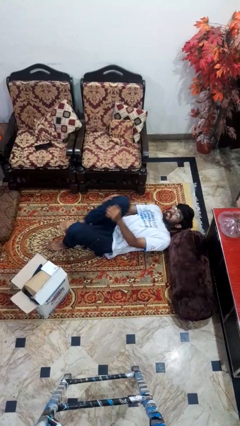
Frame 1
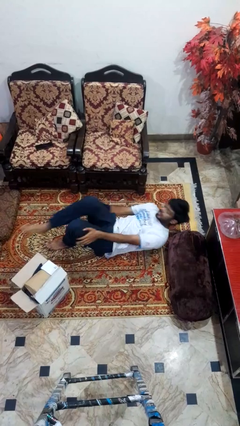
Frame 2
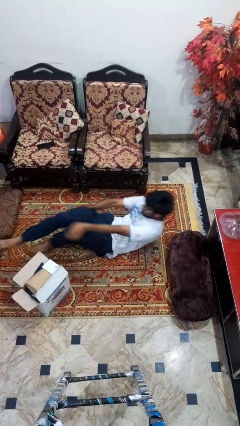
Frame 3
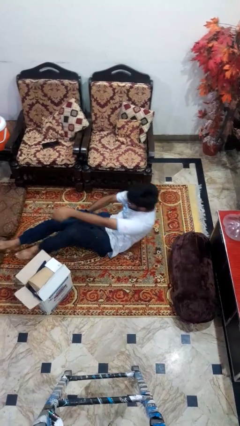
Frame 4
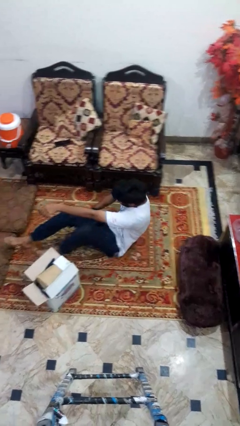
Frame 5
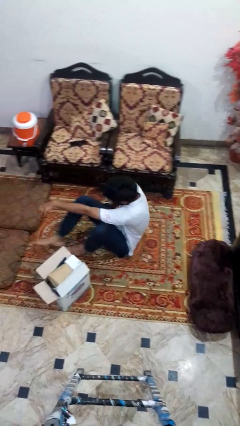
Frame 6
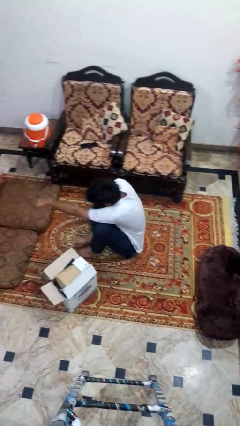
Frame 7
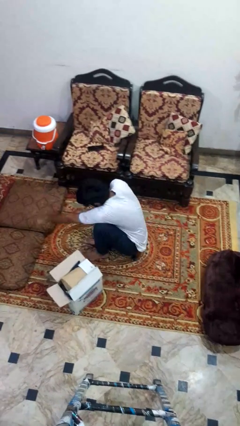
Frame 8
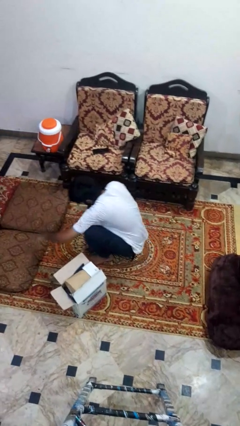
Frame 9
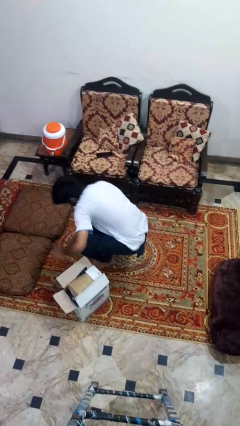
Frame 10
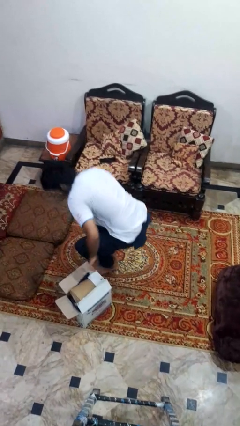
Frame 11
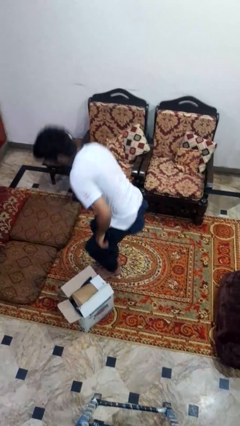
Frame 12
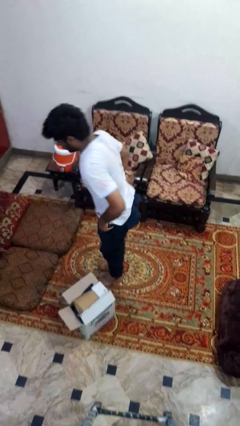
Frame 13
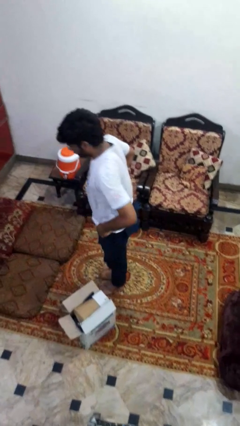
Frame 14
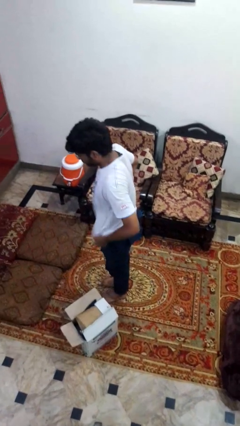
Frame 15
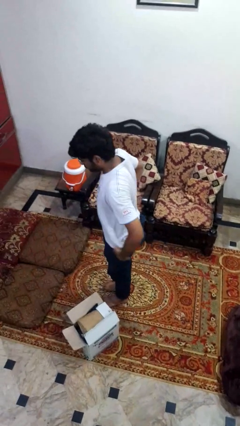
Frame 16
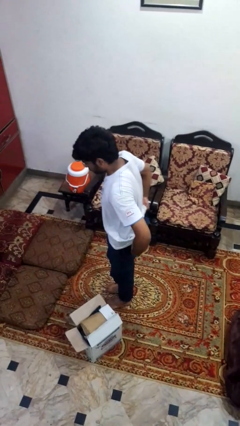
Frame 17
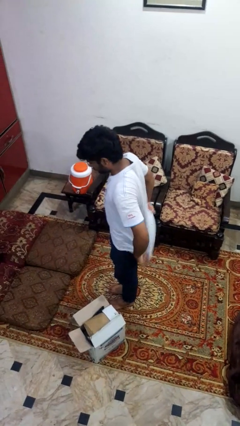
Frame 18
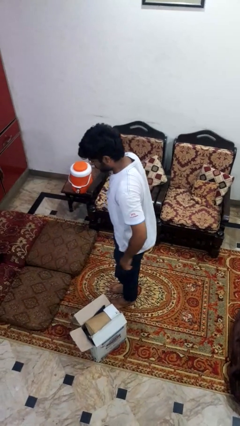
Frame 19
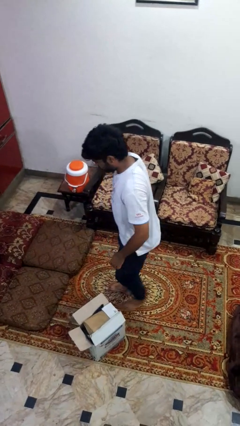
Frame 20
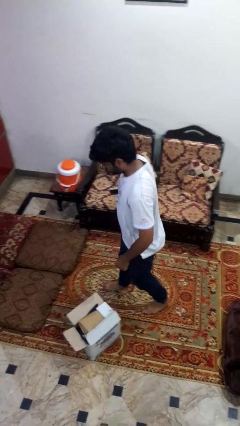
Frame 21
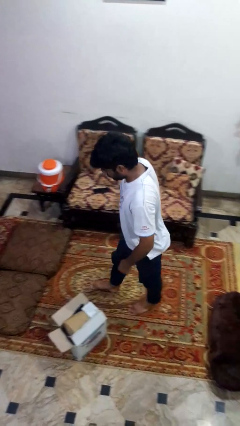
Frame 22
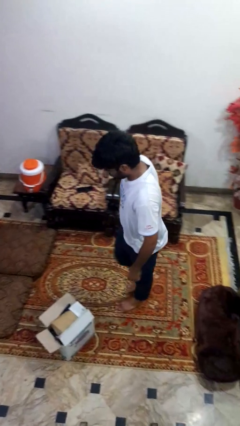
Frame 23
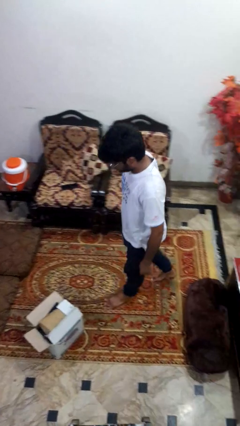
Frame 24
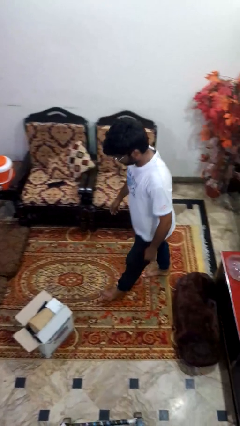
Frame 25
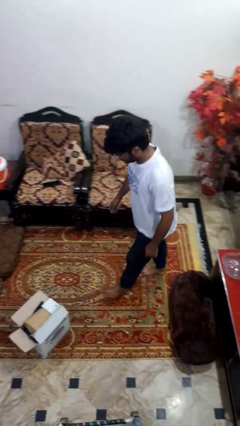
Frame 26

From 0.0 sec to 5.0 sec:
person stands up from floor

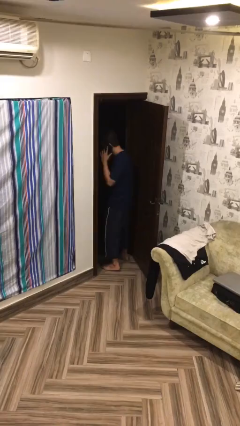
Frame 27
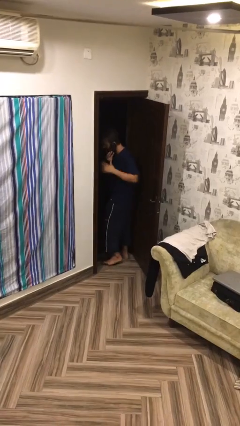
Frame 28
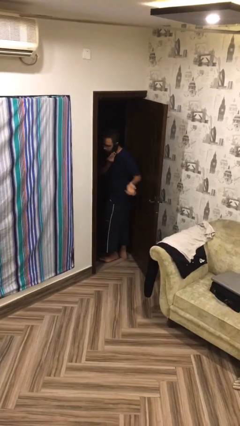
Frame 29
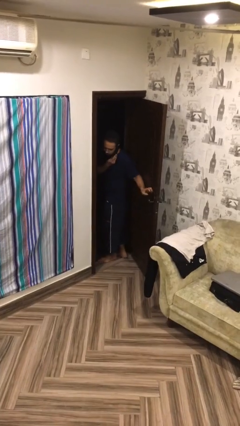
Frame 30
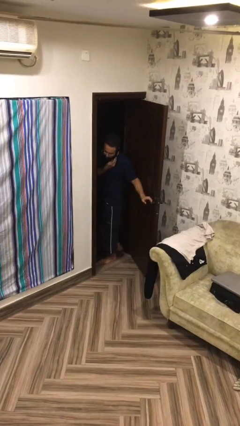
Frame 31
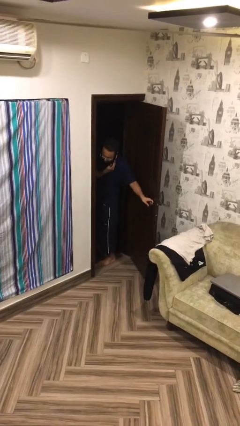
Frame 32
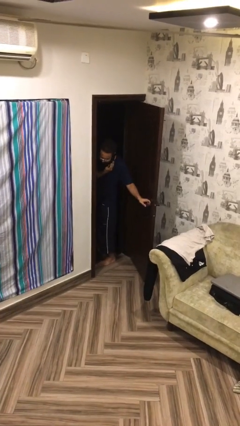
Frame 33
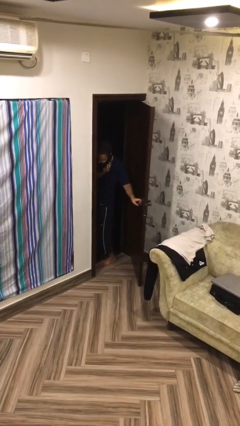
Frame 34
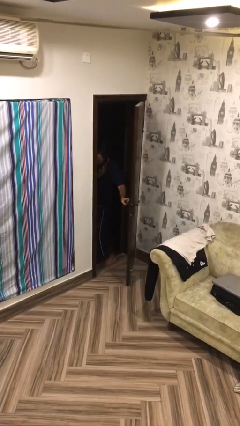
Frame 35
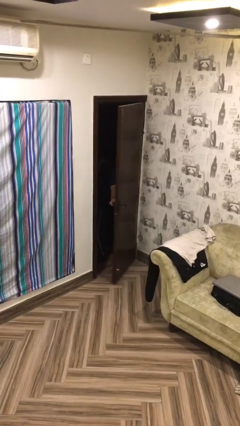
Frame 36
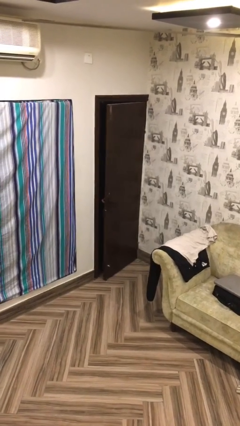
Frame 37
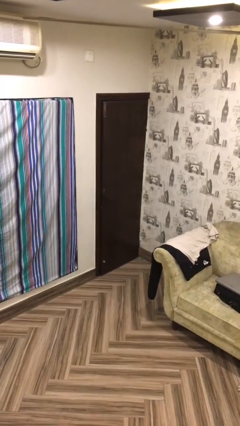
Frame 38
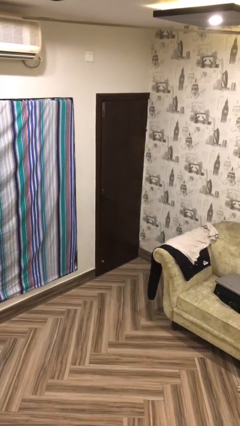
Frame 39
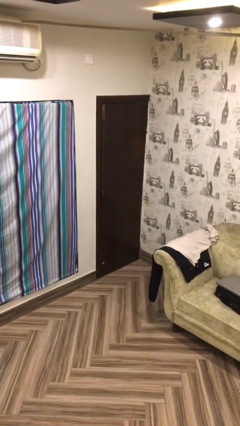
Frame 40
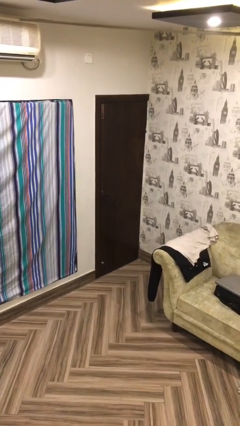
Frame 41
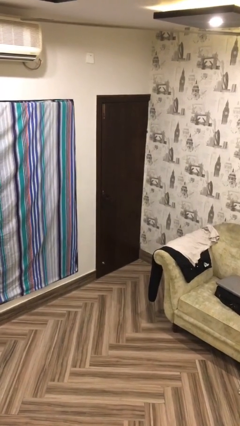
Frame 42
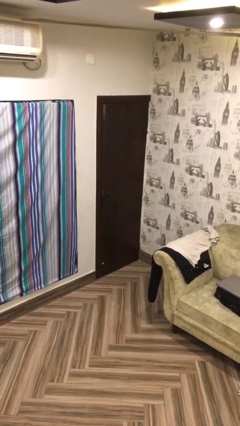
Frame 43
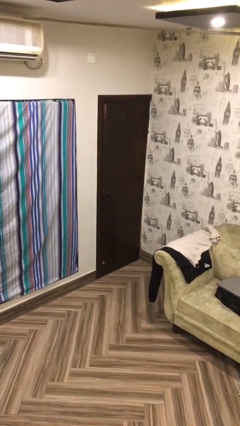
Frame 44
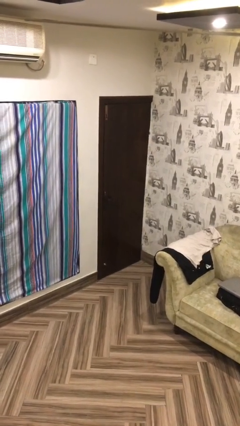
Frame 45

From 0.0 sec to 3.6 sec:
person closes facility door

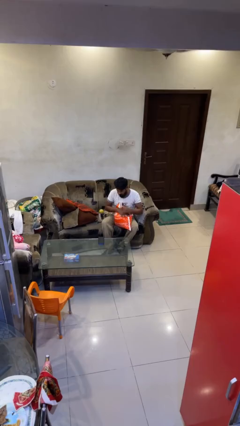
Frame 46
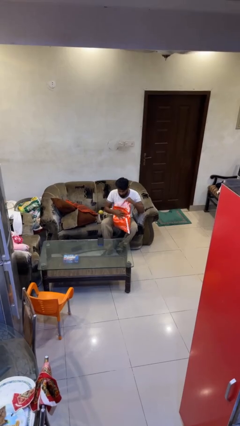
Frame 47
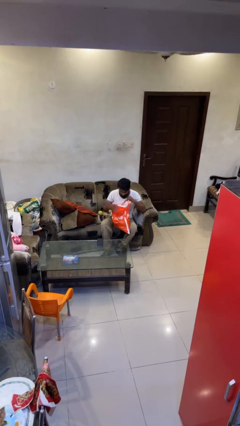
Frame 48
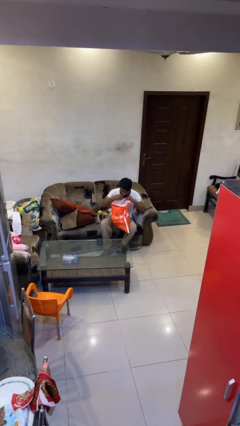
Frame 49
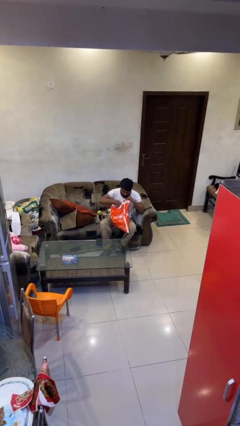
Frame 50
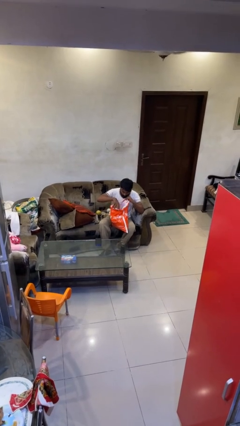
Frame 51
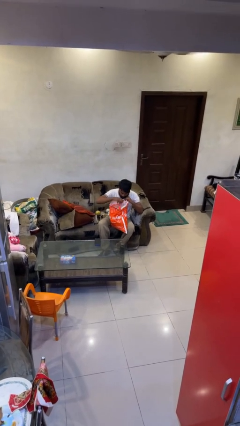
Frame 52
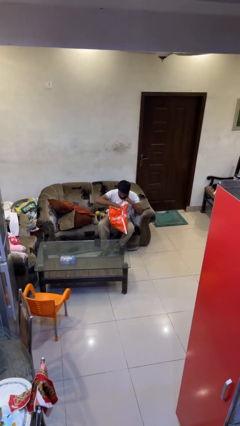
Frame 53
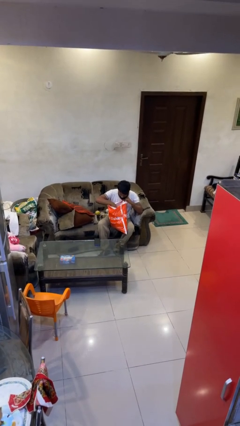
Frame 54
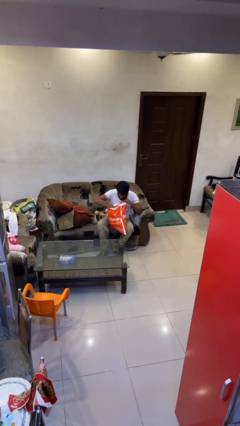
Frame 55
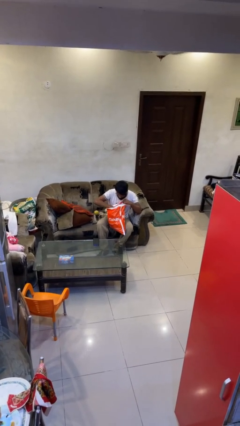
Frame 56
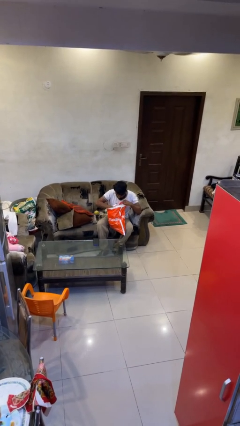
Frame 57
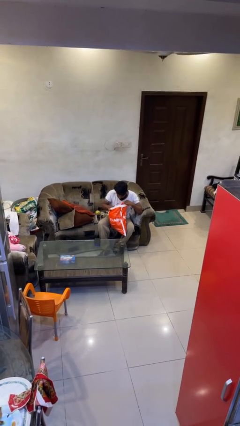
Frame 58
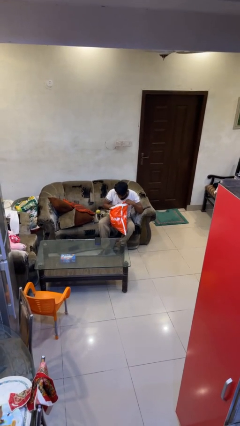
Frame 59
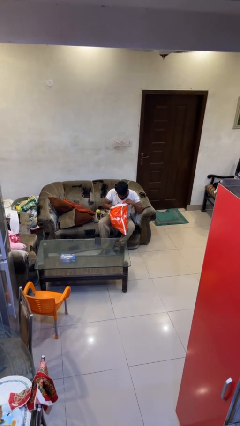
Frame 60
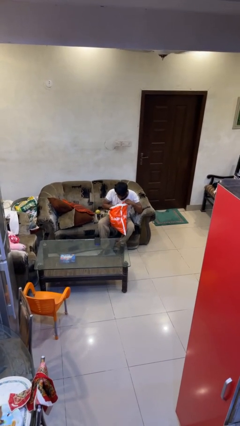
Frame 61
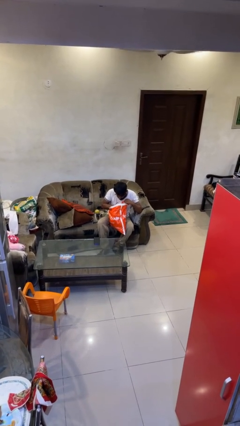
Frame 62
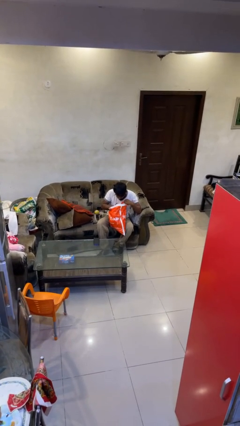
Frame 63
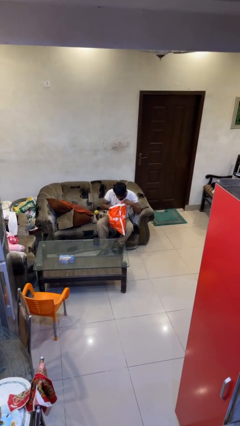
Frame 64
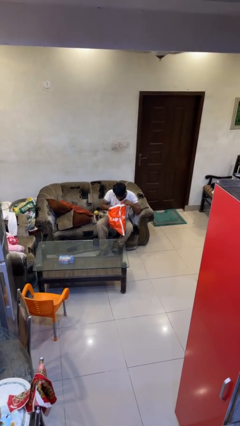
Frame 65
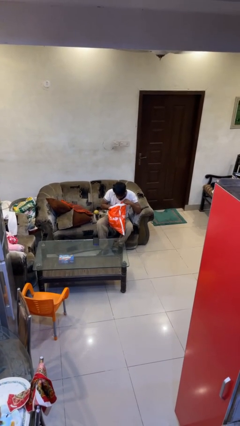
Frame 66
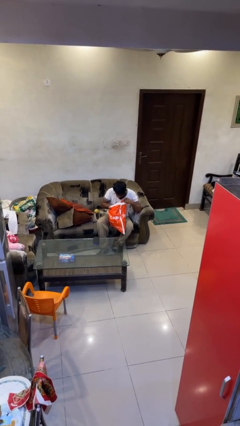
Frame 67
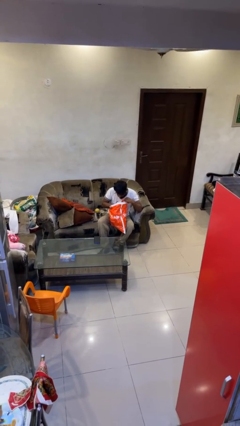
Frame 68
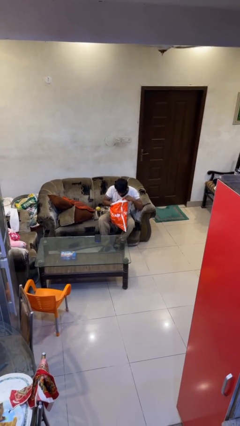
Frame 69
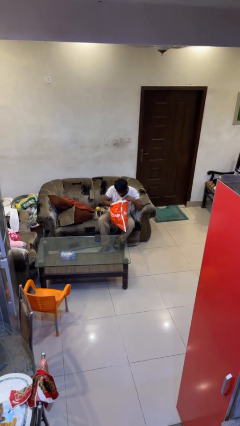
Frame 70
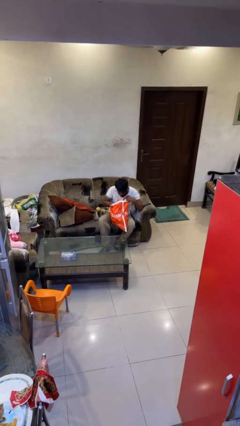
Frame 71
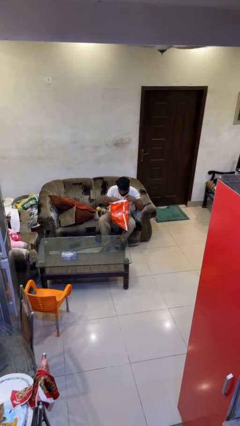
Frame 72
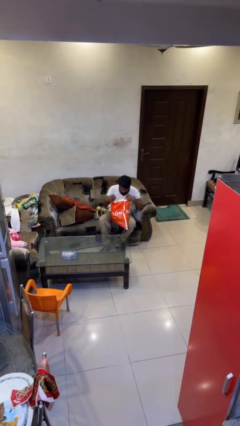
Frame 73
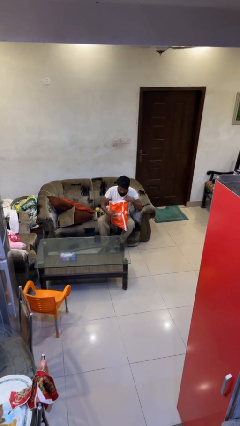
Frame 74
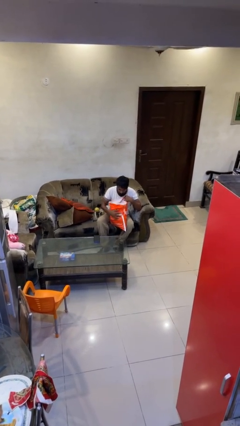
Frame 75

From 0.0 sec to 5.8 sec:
person searches in bag

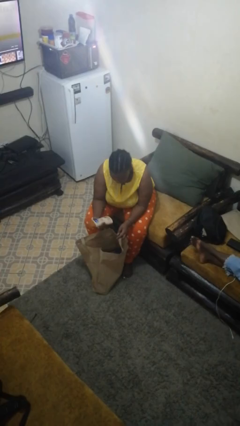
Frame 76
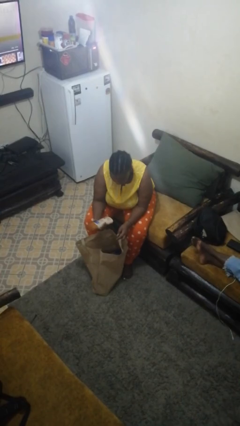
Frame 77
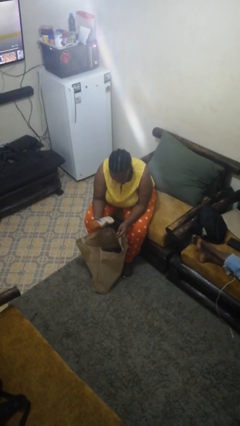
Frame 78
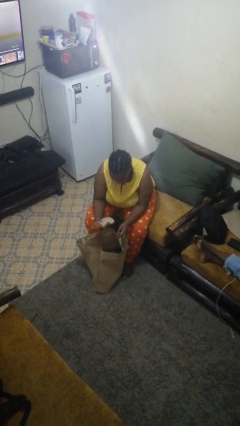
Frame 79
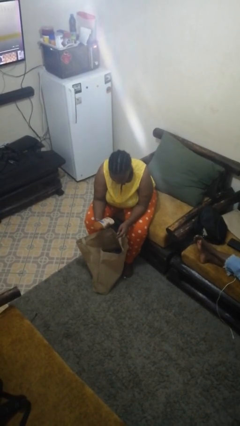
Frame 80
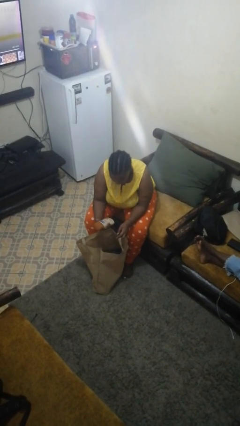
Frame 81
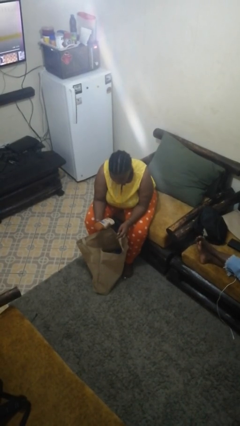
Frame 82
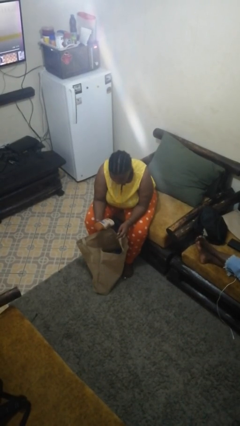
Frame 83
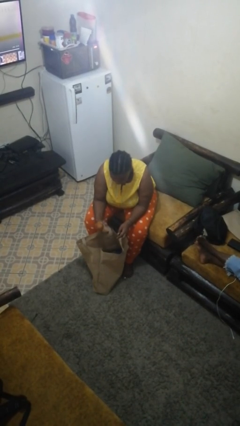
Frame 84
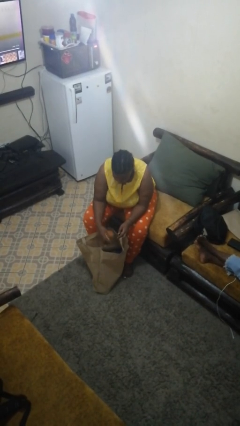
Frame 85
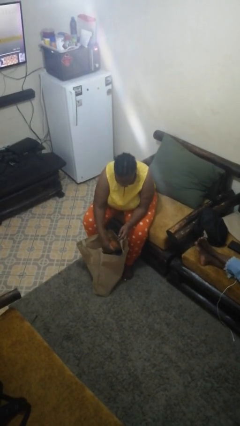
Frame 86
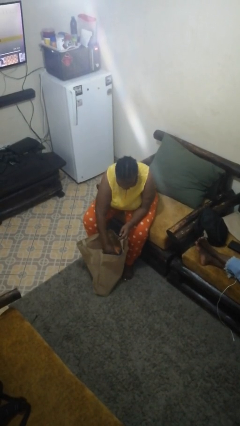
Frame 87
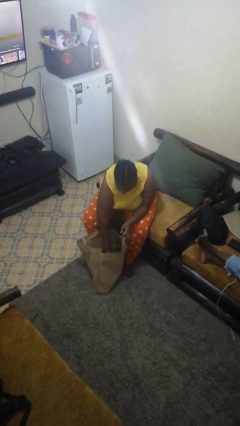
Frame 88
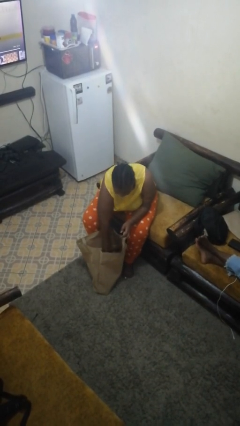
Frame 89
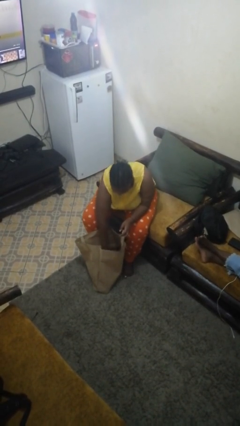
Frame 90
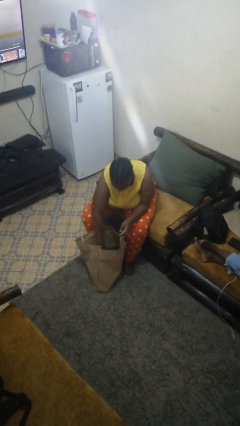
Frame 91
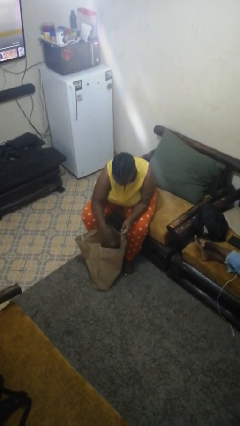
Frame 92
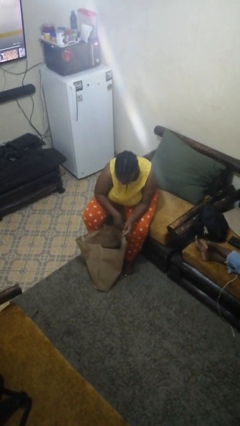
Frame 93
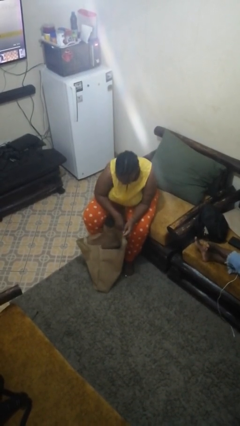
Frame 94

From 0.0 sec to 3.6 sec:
person puts object into bag
